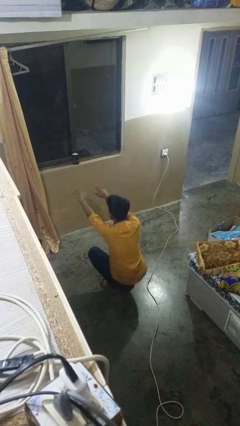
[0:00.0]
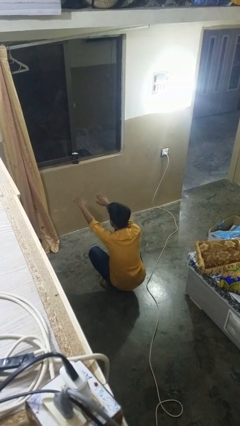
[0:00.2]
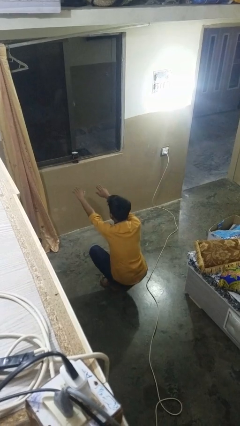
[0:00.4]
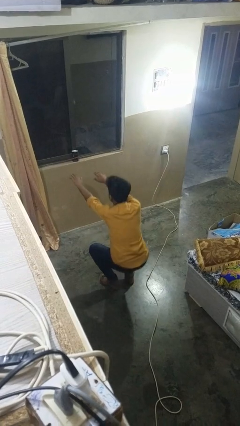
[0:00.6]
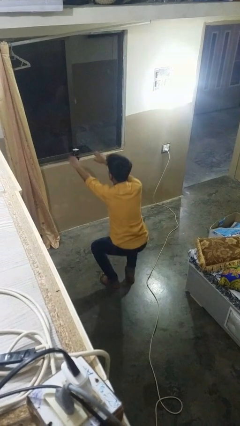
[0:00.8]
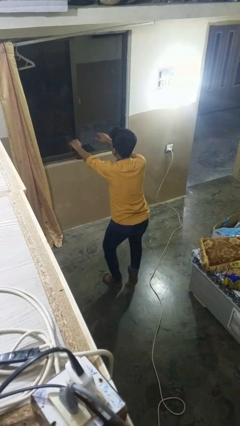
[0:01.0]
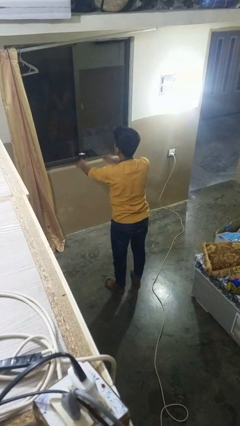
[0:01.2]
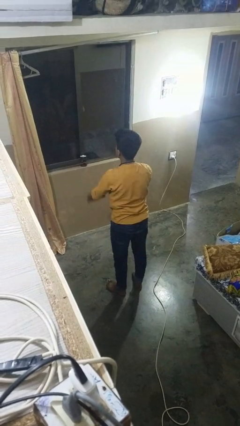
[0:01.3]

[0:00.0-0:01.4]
person stands up

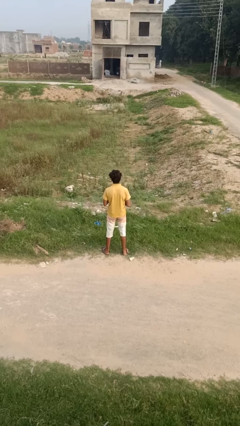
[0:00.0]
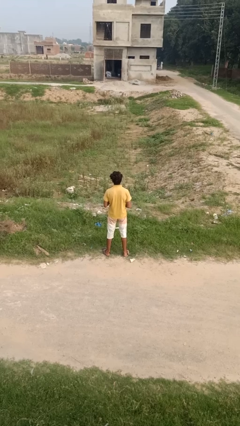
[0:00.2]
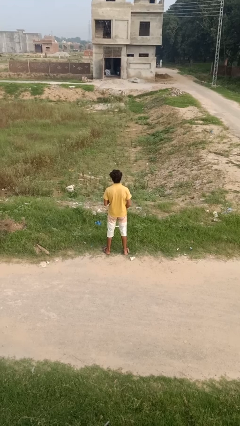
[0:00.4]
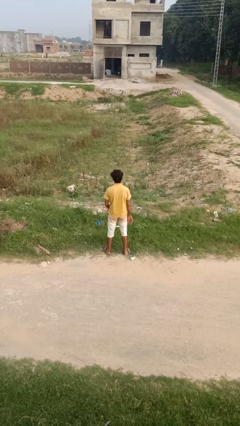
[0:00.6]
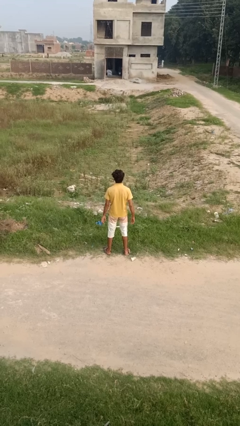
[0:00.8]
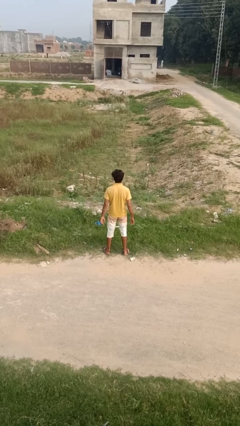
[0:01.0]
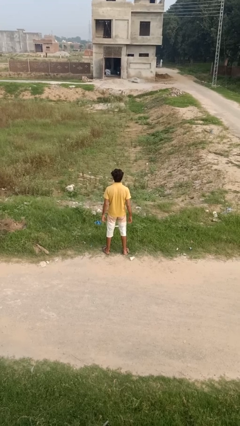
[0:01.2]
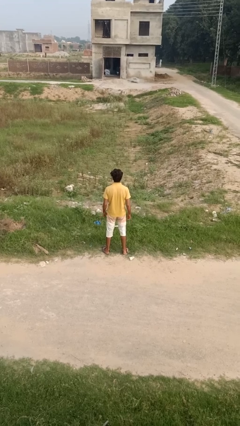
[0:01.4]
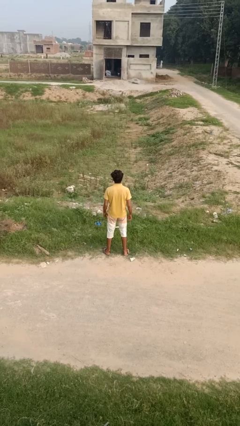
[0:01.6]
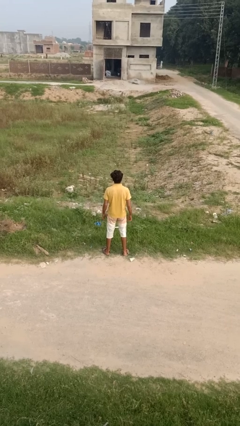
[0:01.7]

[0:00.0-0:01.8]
person buttons shirt

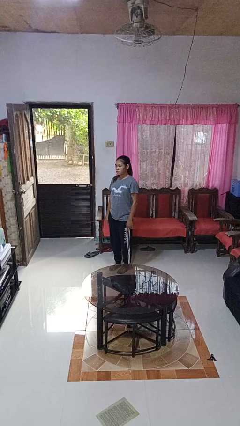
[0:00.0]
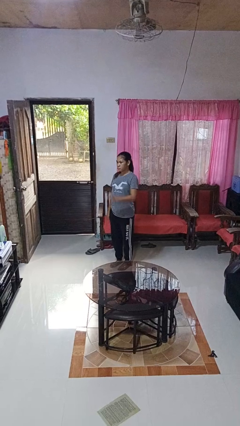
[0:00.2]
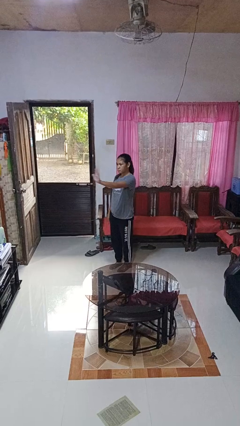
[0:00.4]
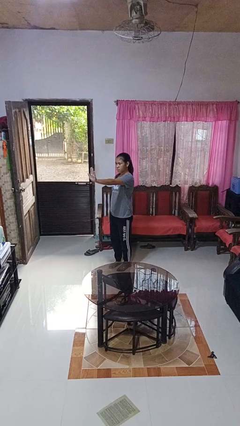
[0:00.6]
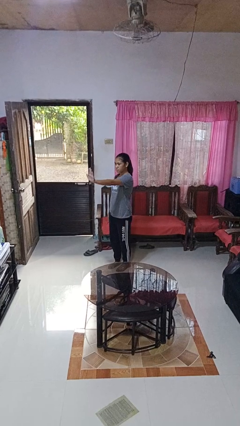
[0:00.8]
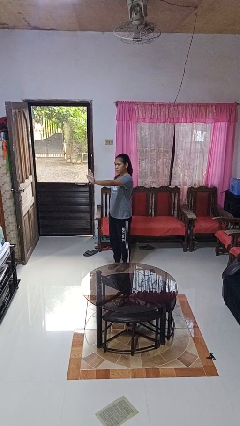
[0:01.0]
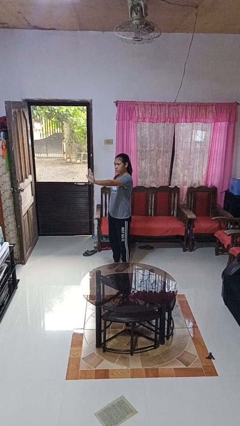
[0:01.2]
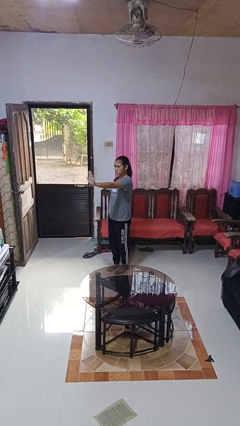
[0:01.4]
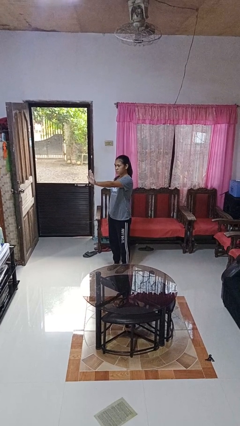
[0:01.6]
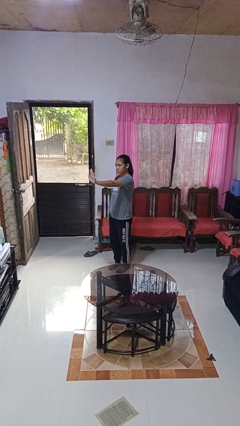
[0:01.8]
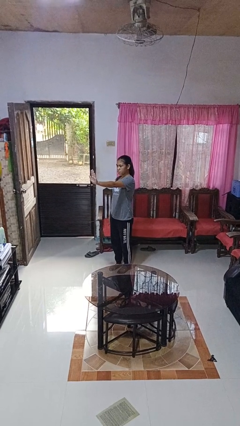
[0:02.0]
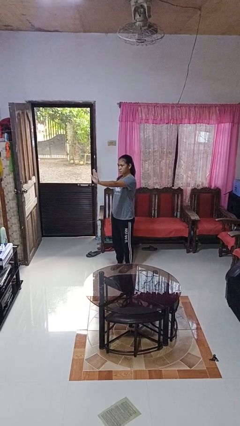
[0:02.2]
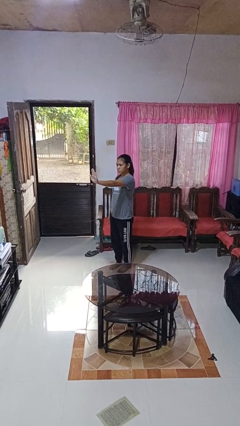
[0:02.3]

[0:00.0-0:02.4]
person gestures stop

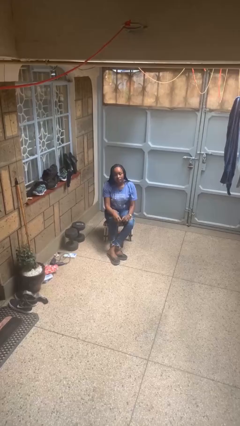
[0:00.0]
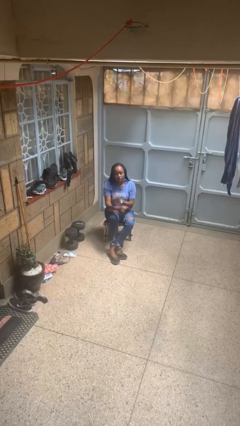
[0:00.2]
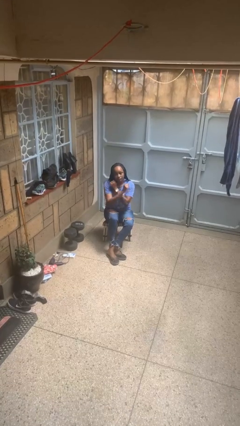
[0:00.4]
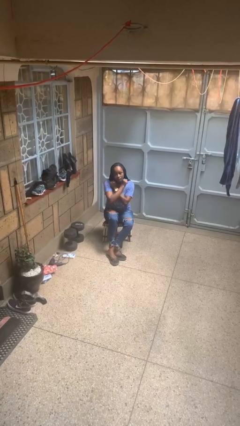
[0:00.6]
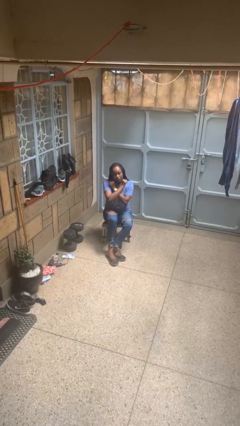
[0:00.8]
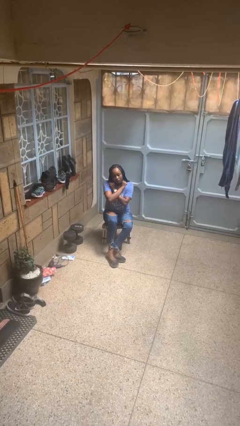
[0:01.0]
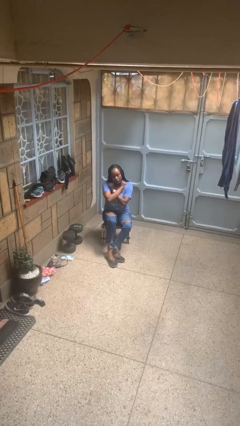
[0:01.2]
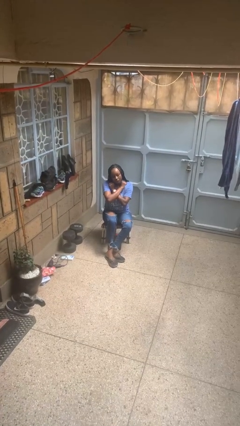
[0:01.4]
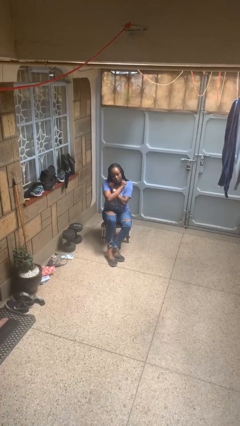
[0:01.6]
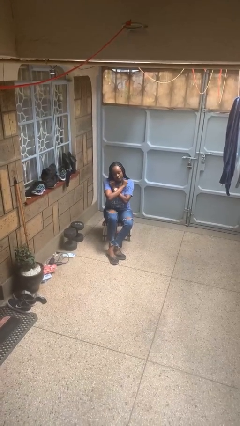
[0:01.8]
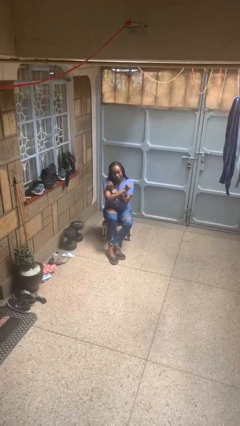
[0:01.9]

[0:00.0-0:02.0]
person gestures arms x

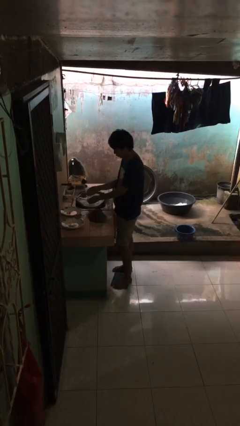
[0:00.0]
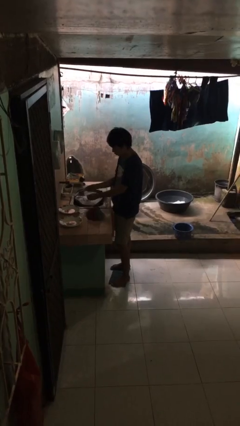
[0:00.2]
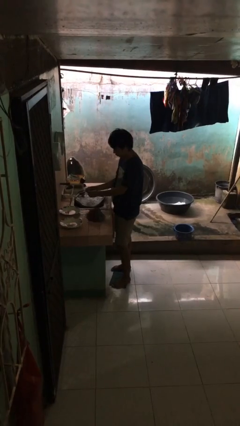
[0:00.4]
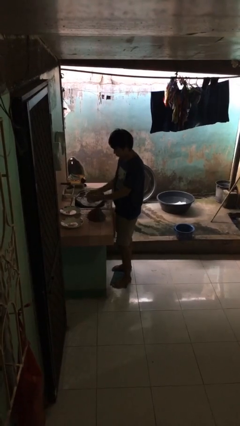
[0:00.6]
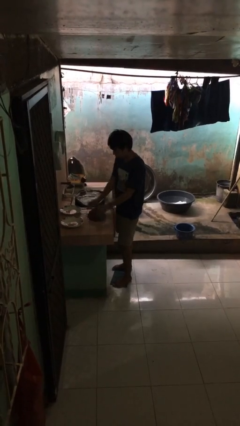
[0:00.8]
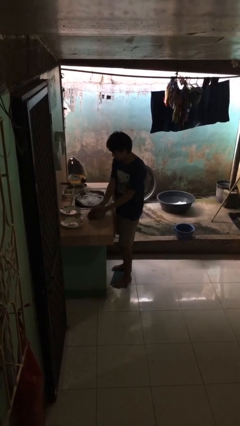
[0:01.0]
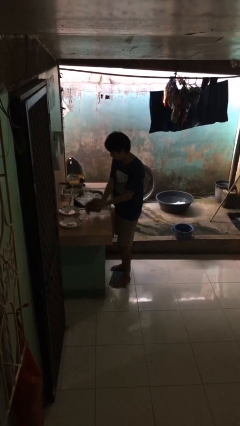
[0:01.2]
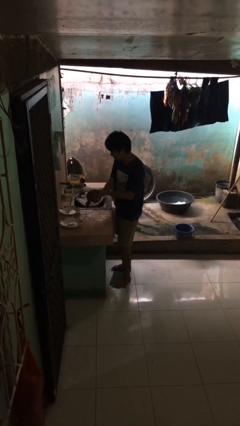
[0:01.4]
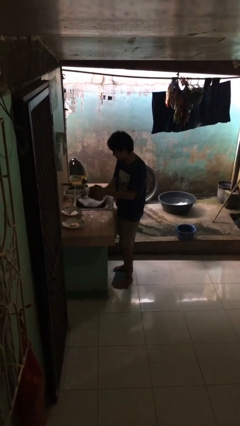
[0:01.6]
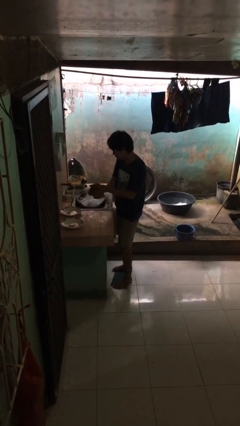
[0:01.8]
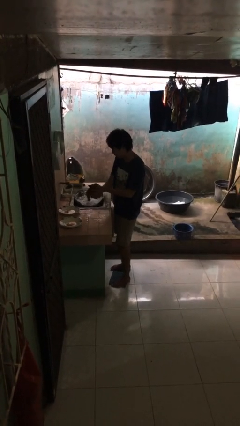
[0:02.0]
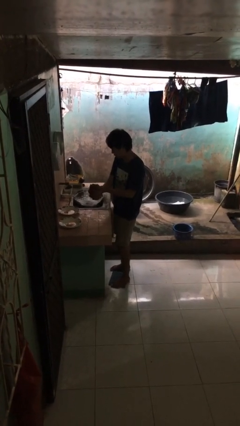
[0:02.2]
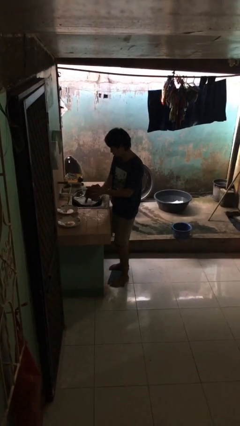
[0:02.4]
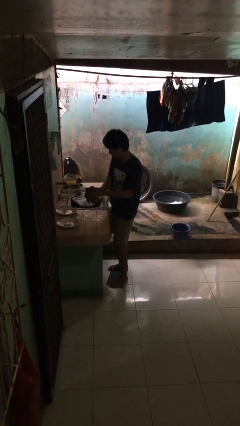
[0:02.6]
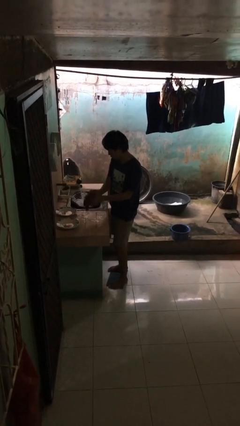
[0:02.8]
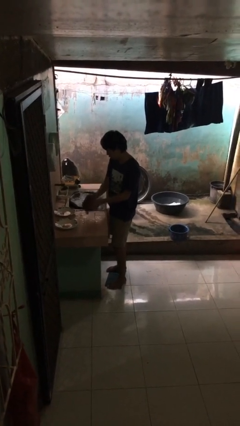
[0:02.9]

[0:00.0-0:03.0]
person dries hands with towel

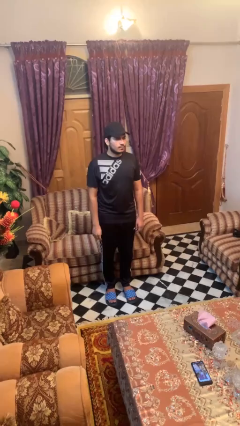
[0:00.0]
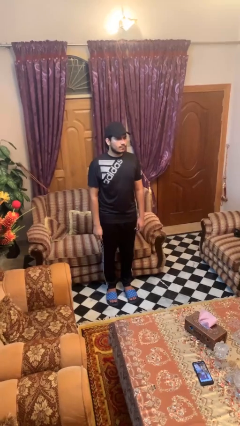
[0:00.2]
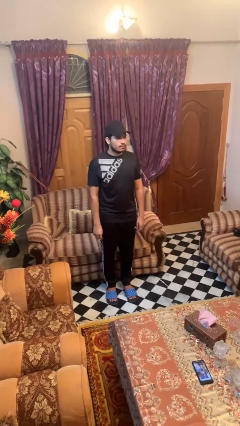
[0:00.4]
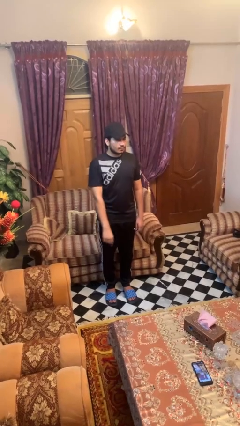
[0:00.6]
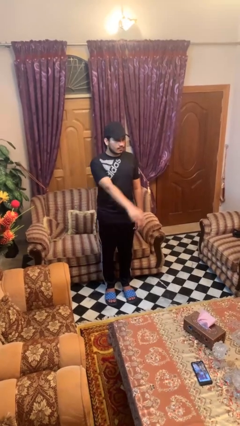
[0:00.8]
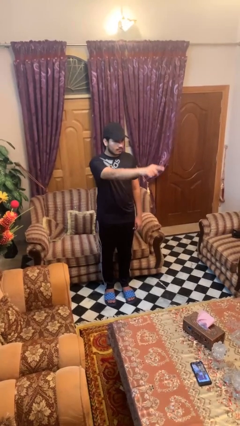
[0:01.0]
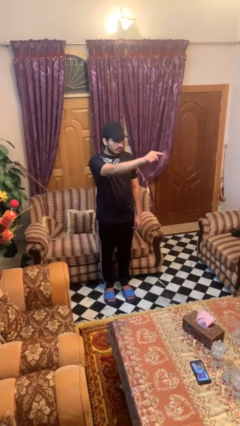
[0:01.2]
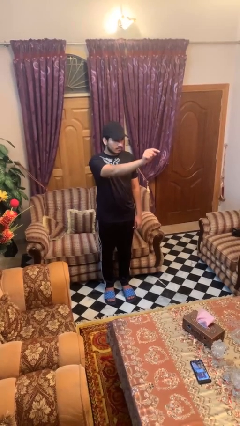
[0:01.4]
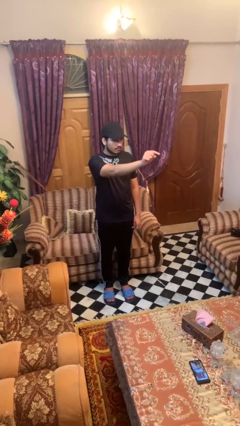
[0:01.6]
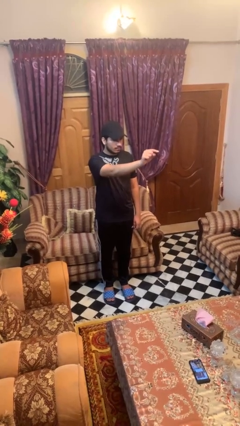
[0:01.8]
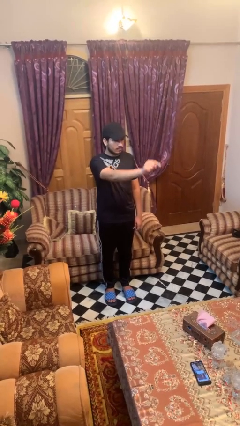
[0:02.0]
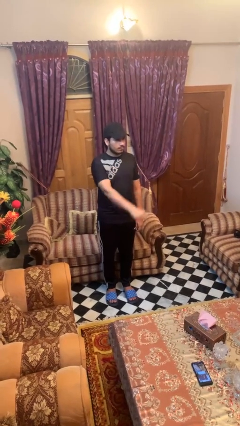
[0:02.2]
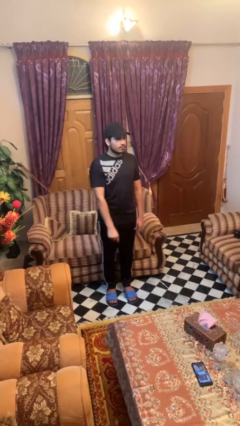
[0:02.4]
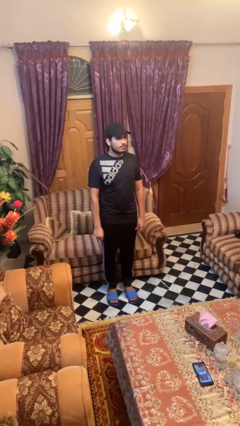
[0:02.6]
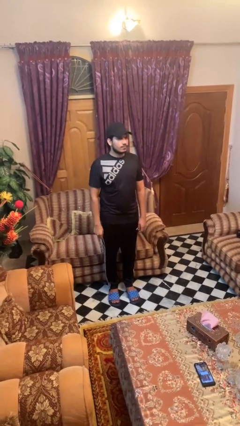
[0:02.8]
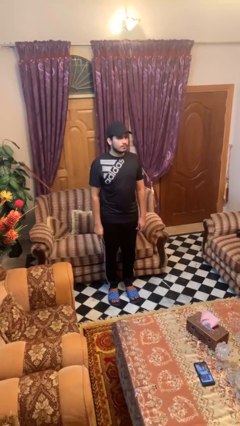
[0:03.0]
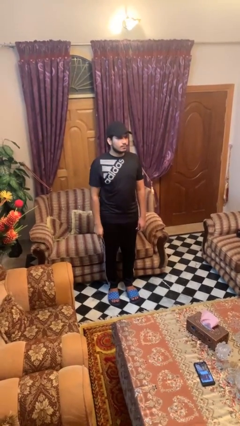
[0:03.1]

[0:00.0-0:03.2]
person points at person

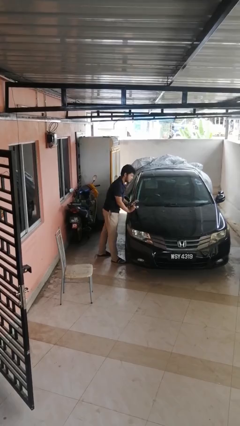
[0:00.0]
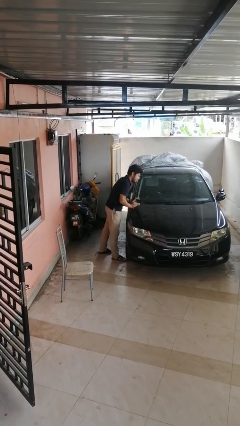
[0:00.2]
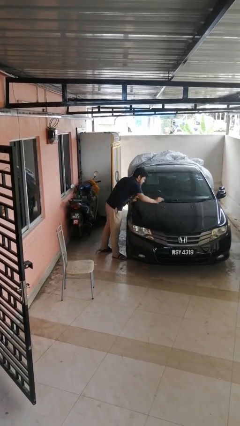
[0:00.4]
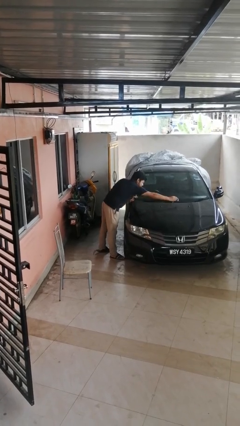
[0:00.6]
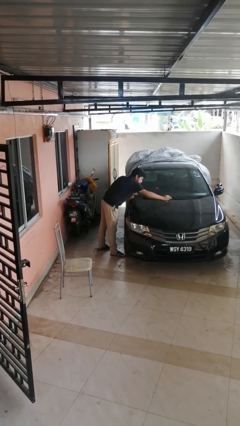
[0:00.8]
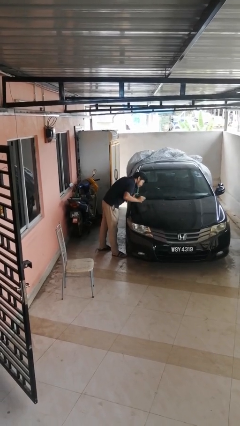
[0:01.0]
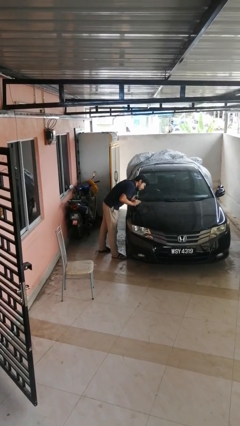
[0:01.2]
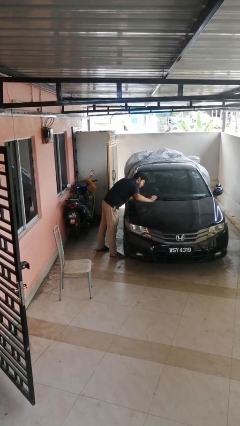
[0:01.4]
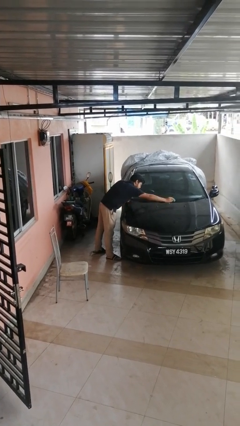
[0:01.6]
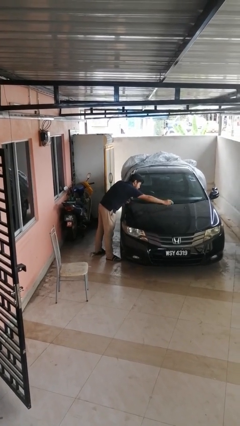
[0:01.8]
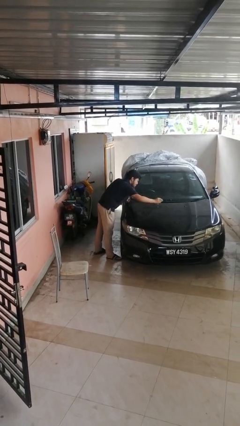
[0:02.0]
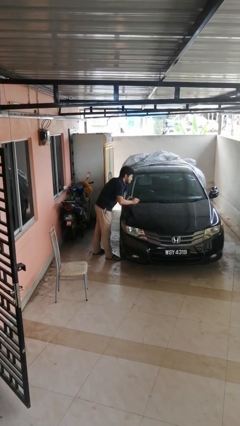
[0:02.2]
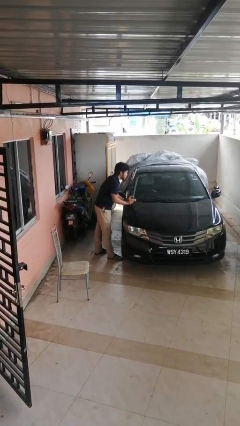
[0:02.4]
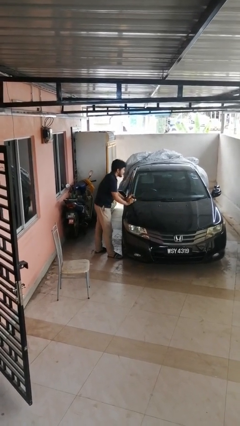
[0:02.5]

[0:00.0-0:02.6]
person polishes car with rag

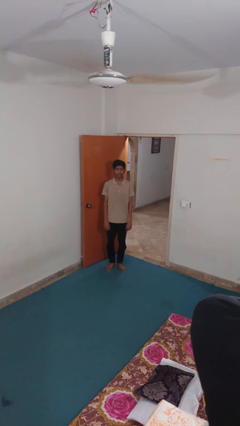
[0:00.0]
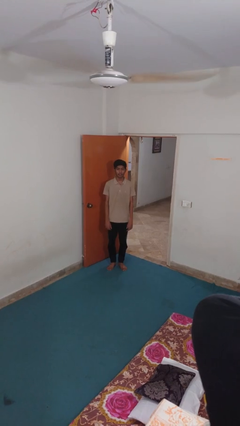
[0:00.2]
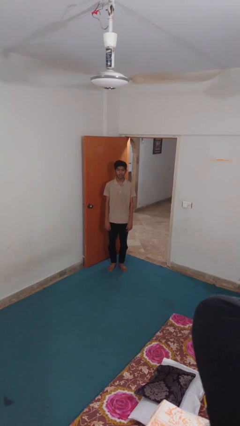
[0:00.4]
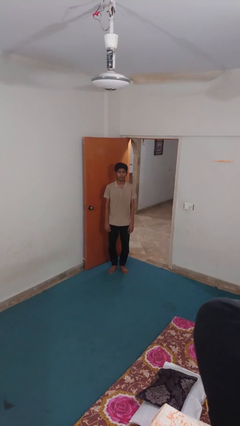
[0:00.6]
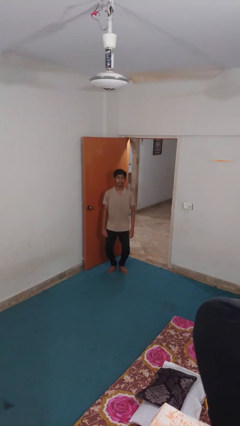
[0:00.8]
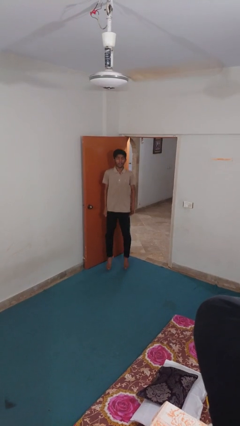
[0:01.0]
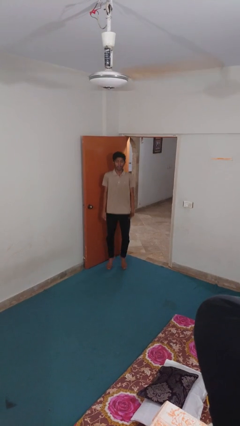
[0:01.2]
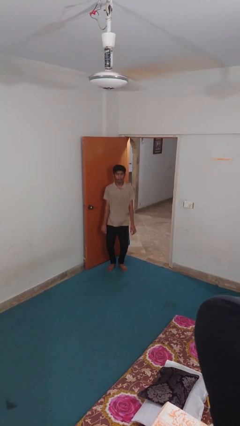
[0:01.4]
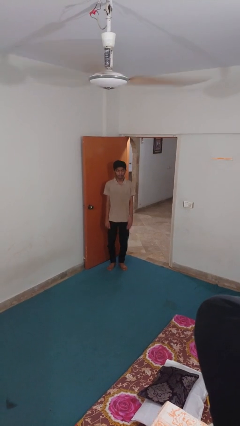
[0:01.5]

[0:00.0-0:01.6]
person jumps
